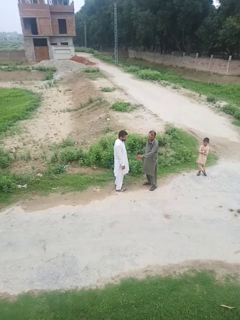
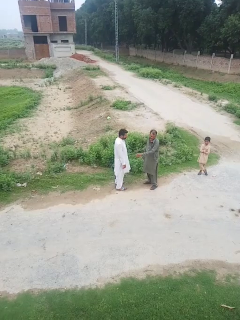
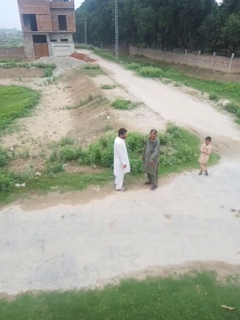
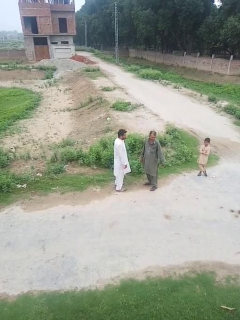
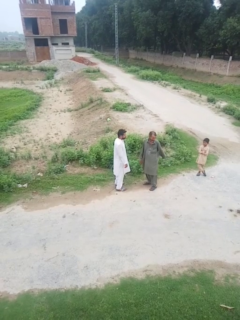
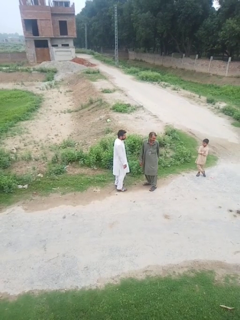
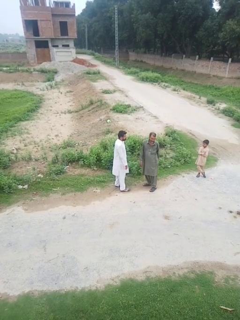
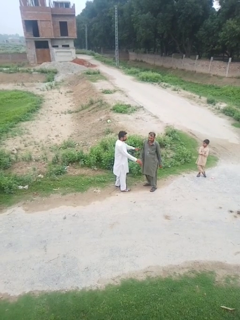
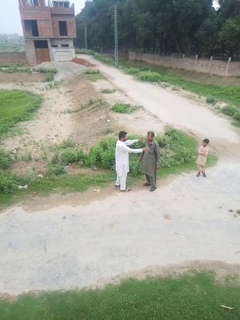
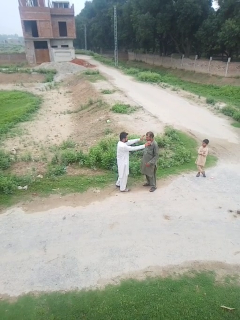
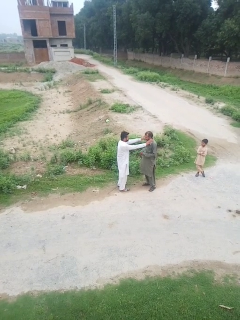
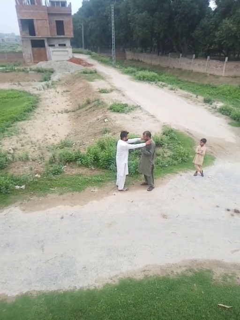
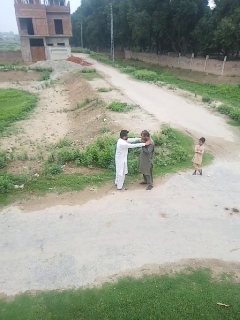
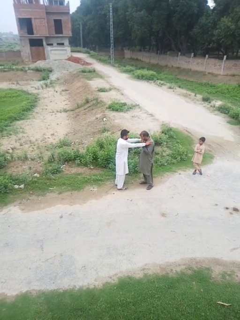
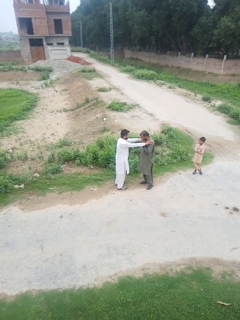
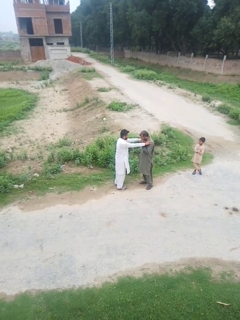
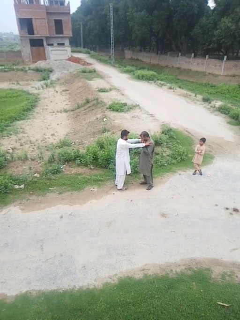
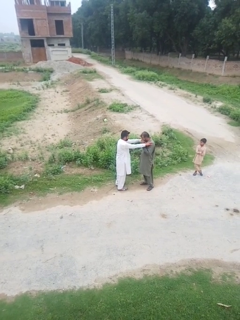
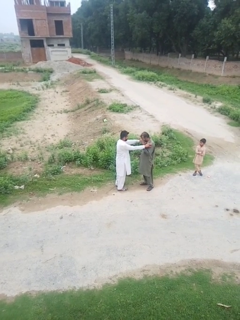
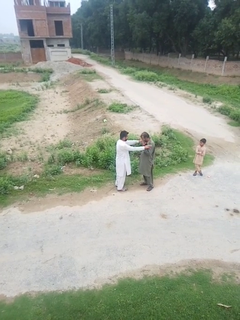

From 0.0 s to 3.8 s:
person pounds shoulders of person

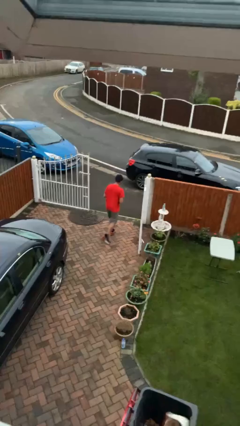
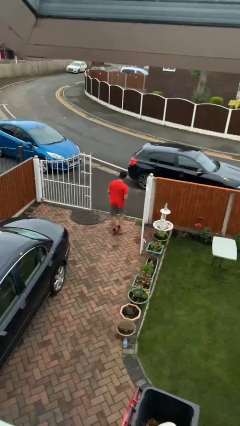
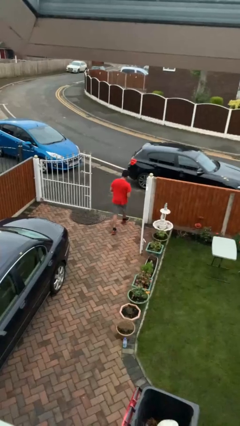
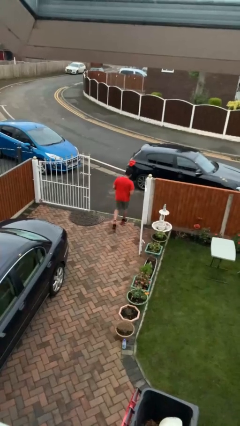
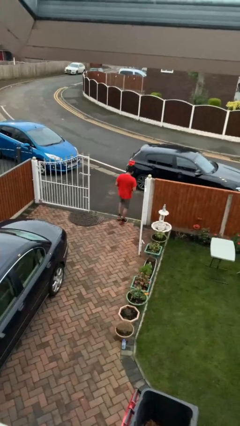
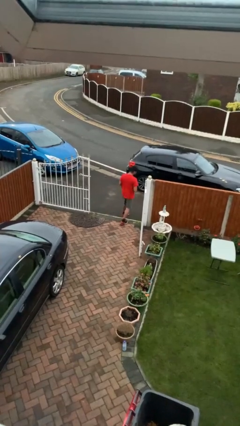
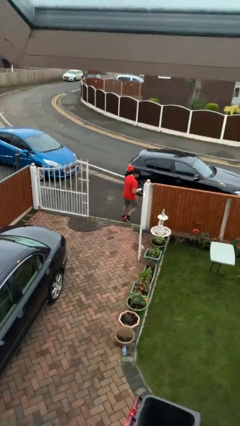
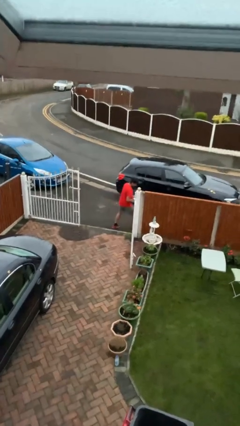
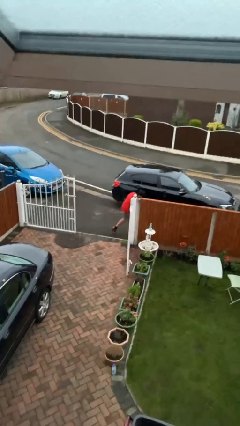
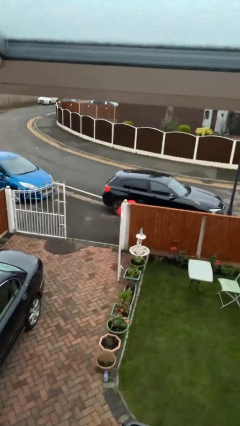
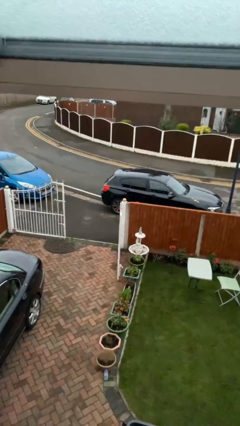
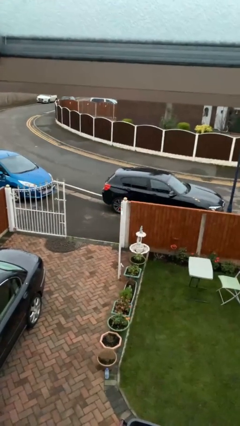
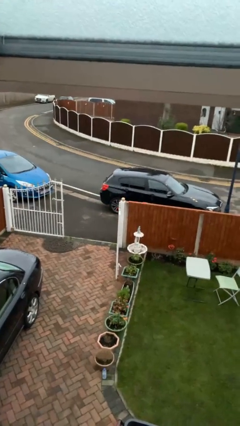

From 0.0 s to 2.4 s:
person exits scene through structure

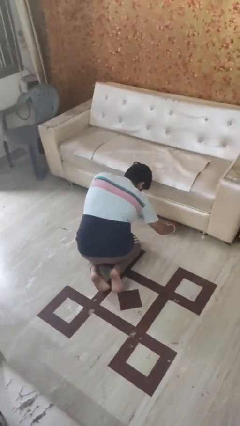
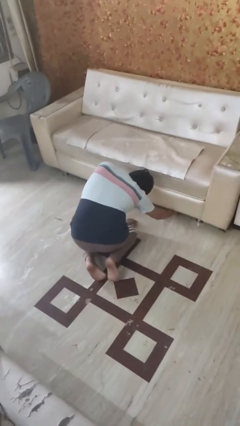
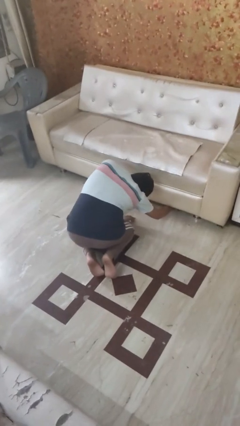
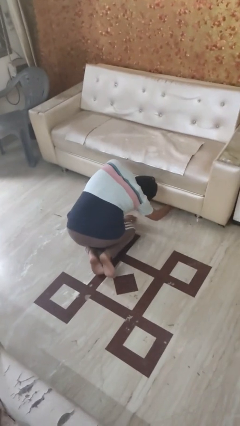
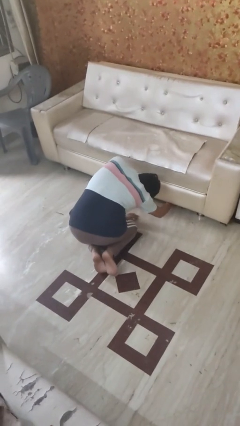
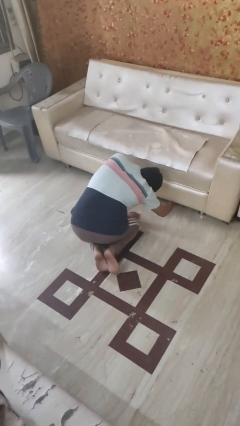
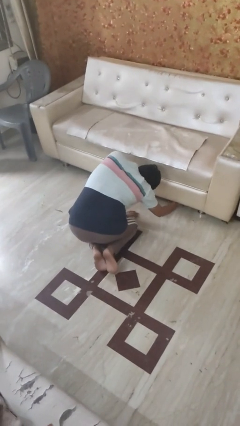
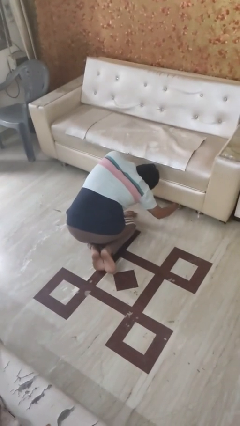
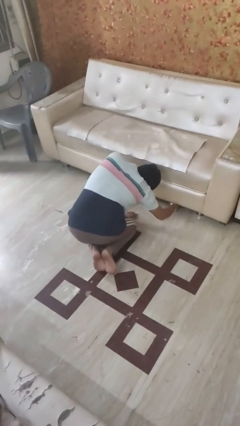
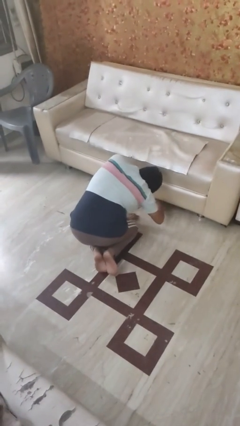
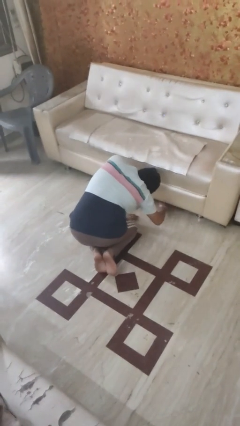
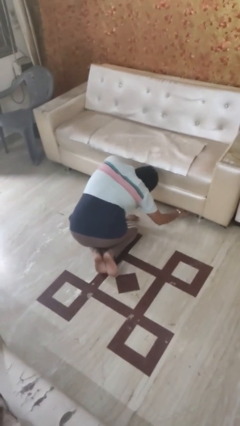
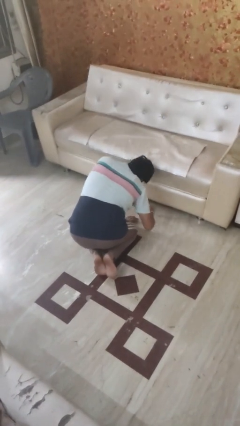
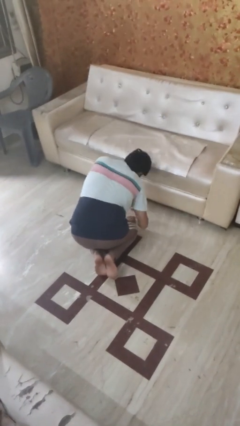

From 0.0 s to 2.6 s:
person searches under bed

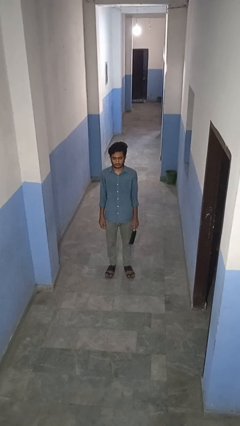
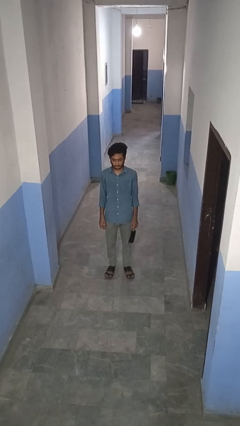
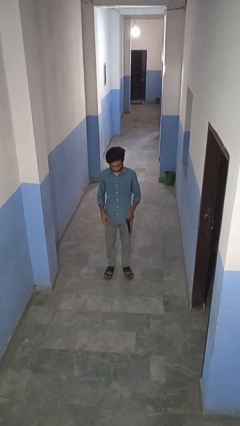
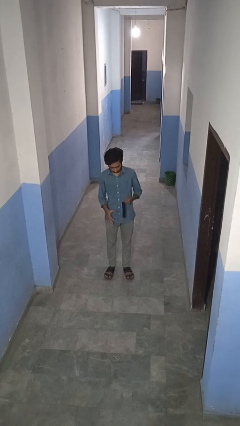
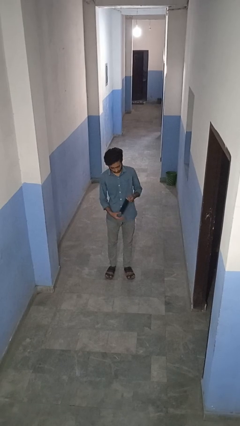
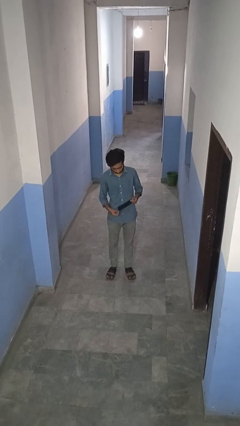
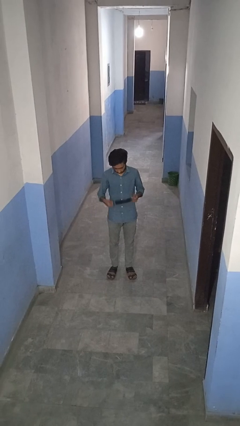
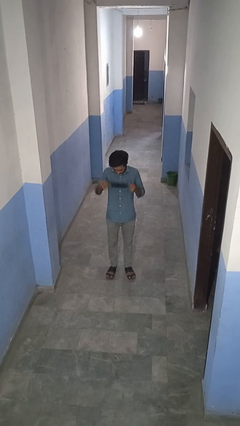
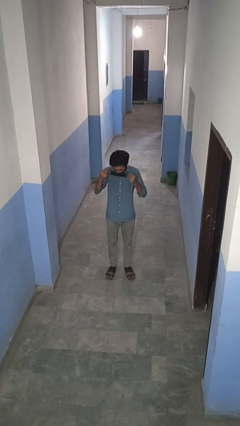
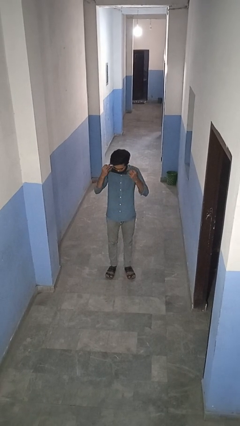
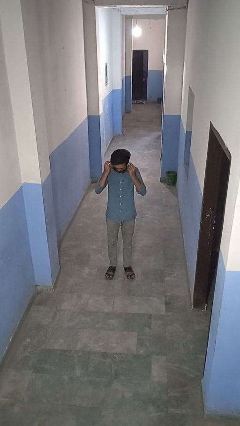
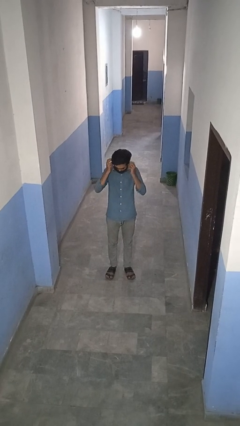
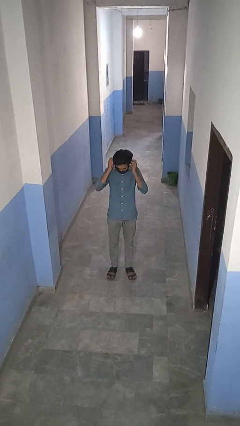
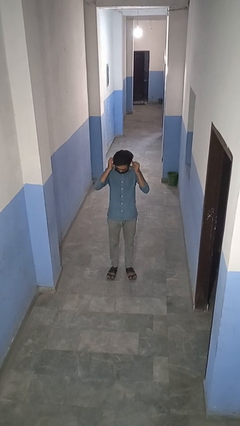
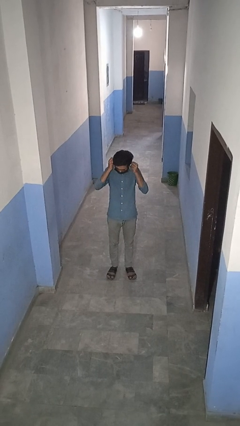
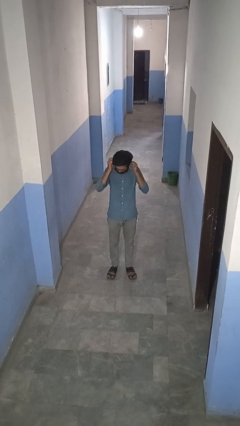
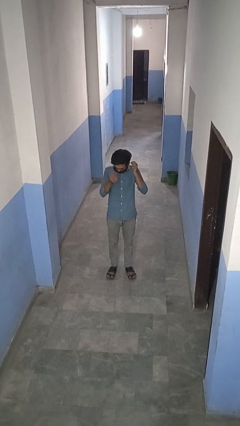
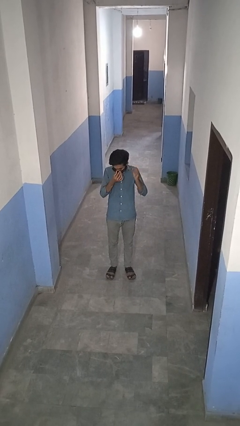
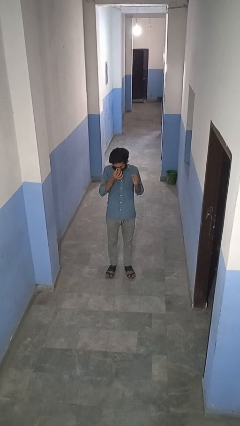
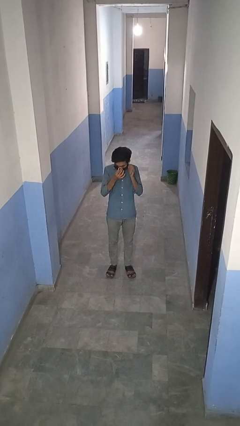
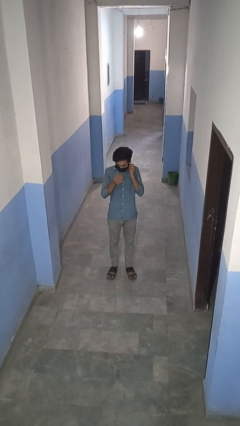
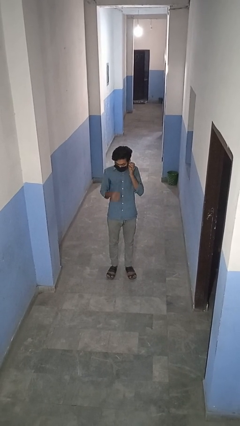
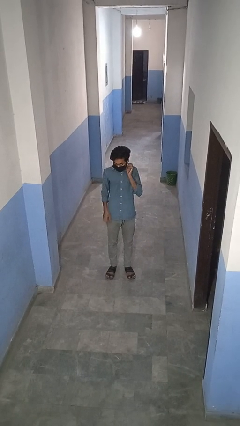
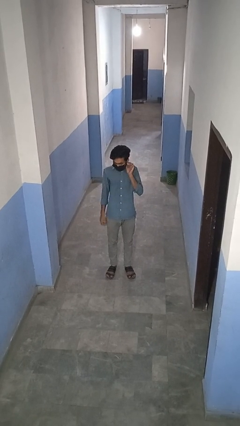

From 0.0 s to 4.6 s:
person puts on facemask

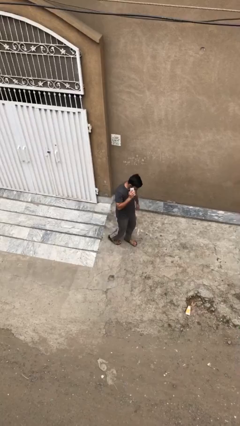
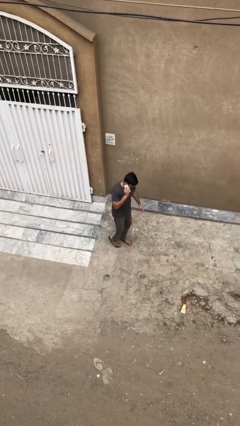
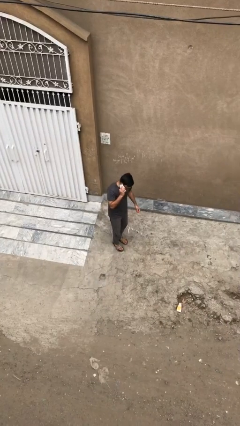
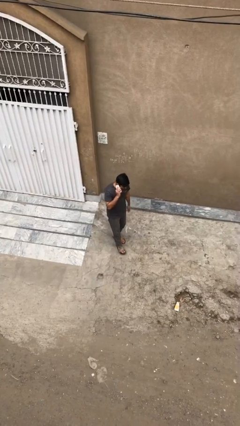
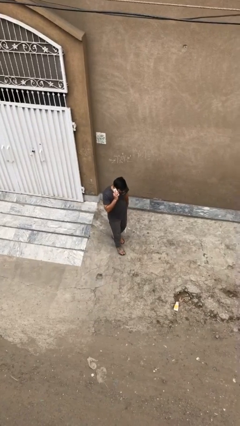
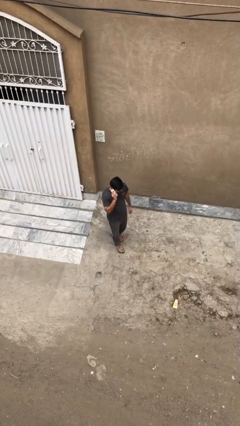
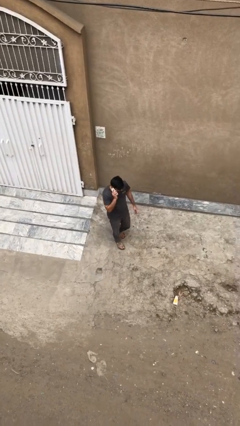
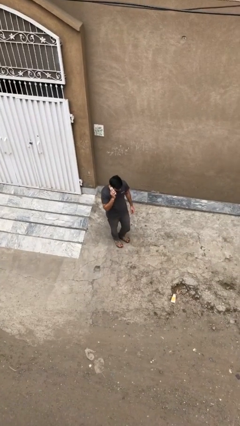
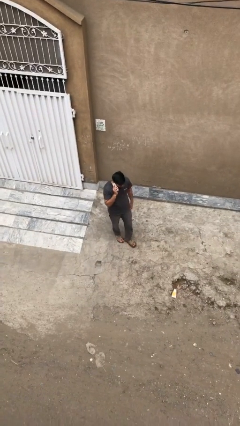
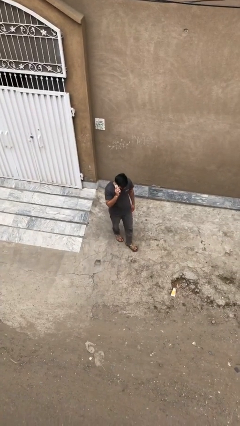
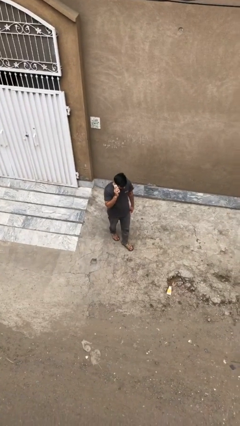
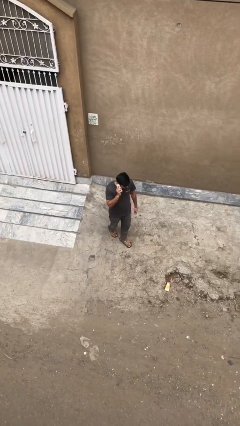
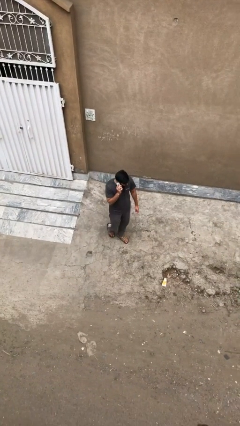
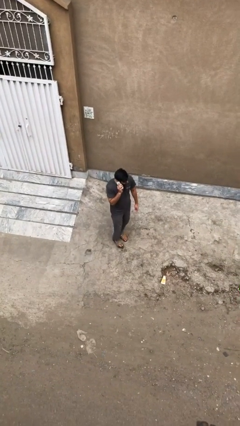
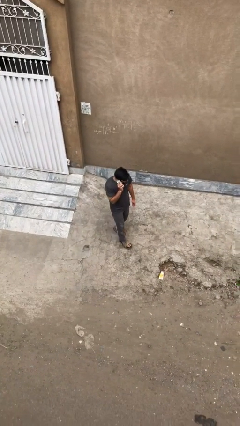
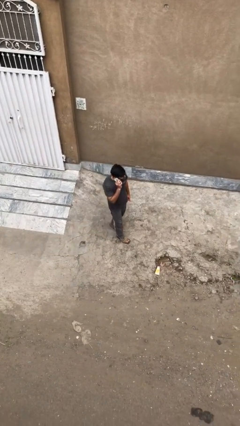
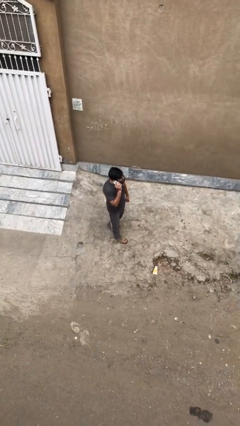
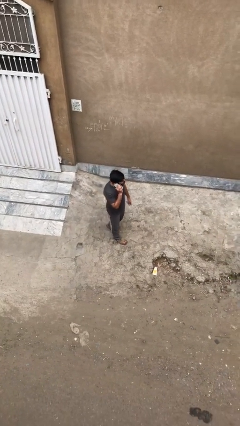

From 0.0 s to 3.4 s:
person talks on phone

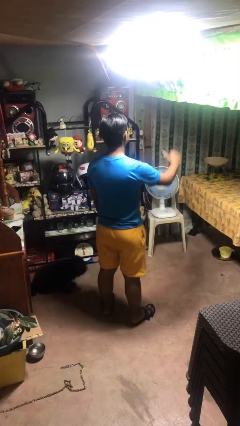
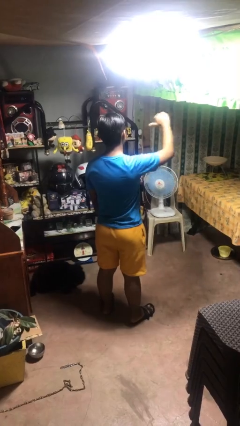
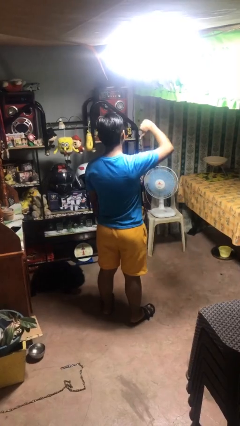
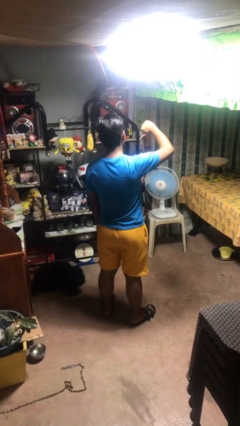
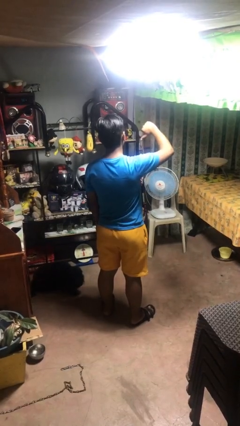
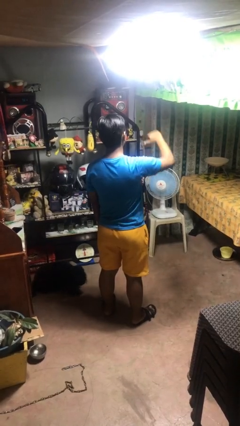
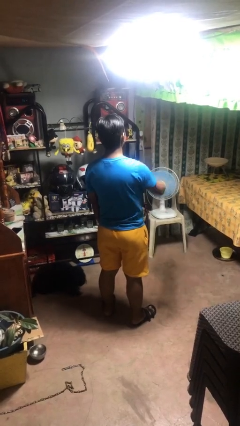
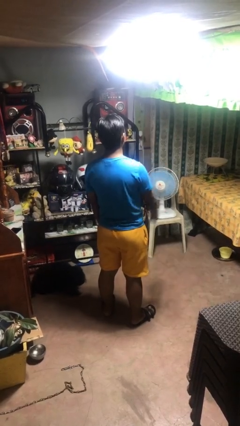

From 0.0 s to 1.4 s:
person gestures thumbs down
